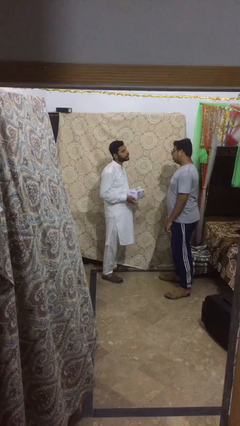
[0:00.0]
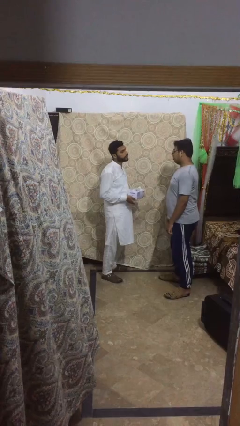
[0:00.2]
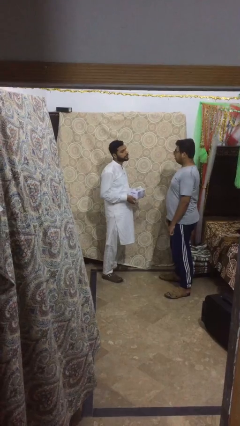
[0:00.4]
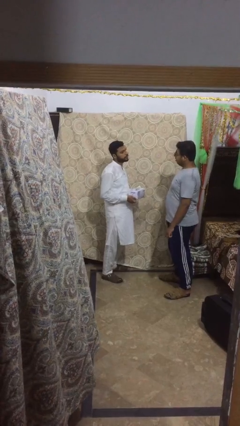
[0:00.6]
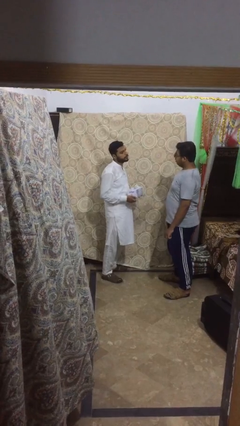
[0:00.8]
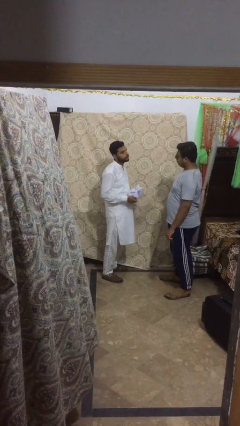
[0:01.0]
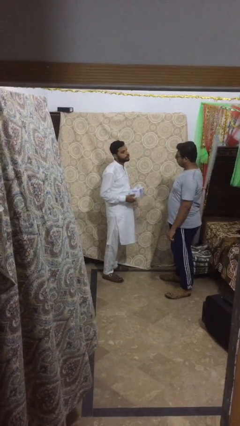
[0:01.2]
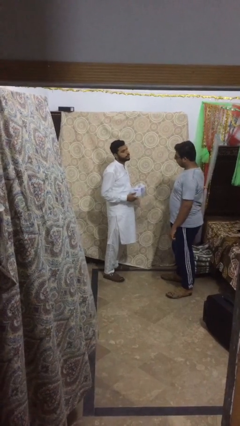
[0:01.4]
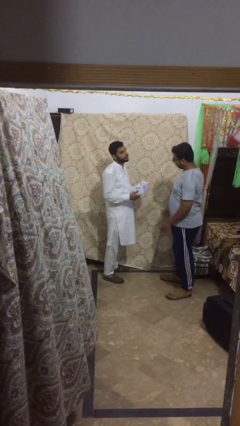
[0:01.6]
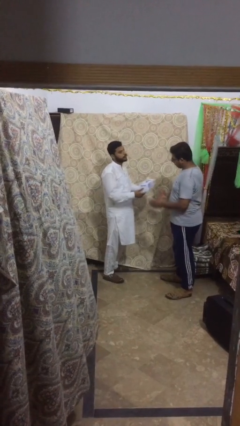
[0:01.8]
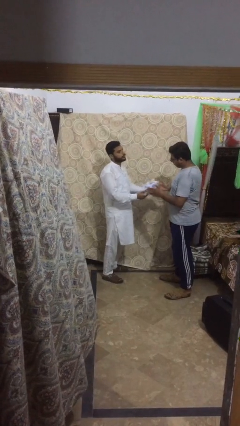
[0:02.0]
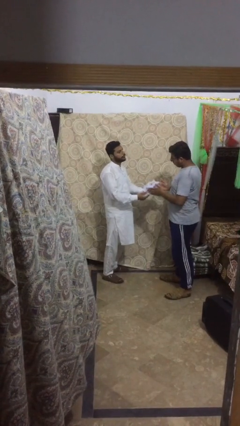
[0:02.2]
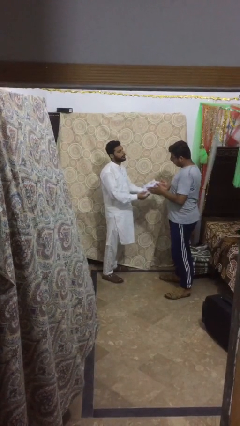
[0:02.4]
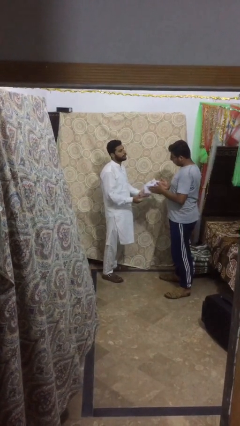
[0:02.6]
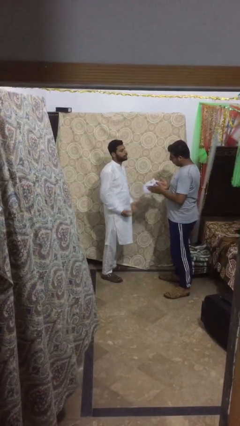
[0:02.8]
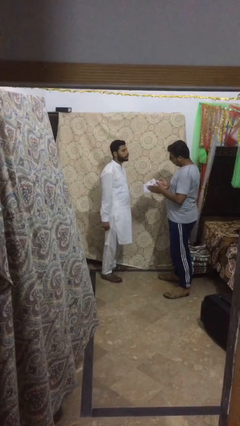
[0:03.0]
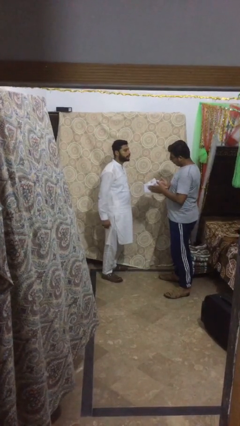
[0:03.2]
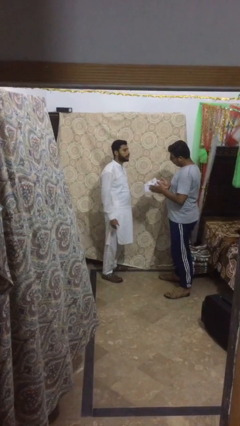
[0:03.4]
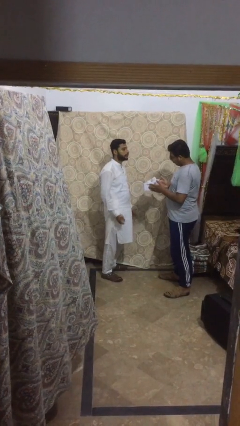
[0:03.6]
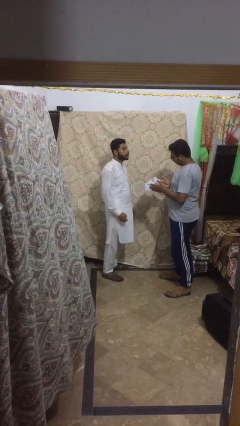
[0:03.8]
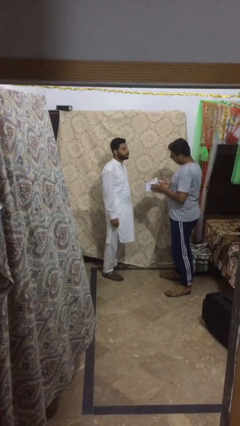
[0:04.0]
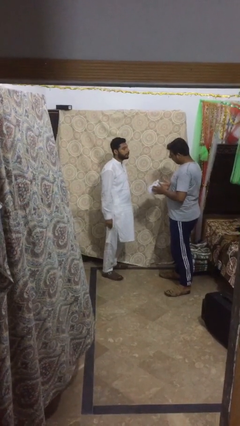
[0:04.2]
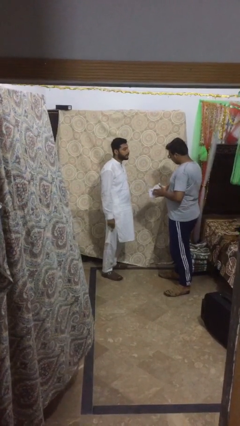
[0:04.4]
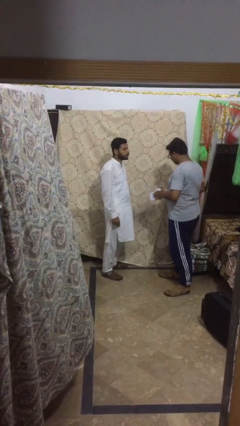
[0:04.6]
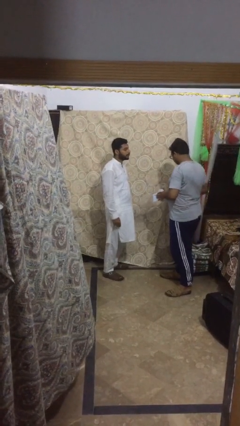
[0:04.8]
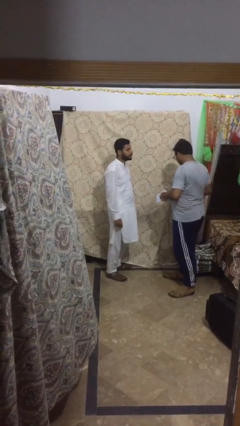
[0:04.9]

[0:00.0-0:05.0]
person transfers object to person

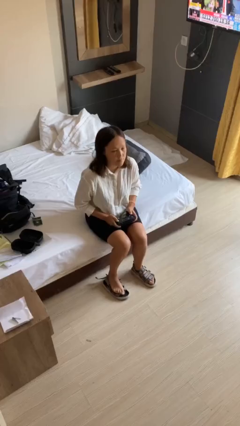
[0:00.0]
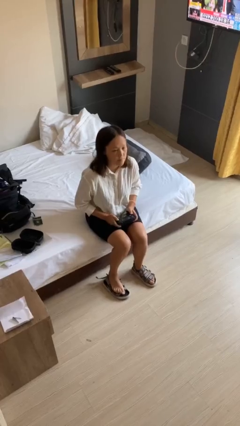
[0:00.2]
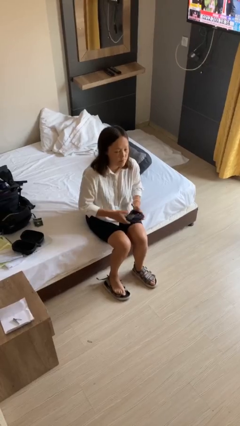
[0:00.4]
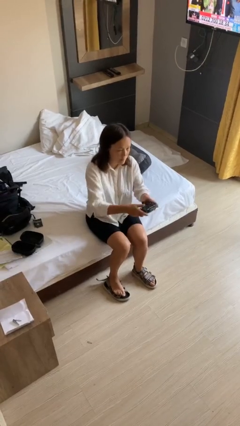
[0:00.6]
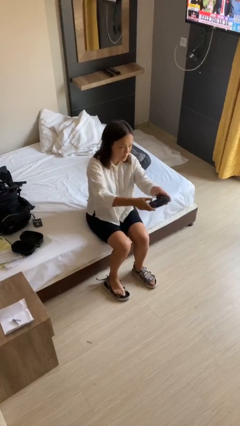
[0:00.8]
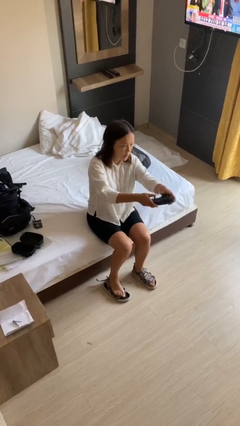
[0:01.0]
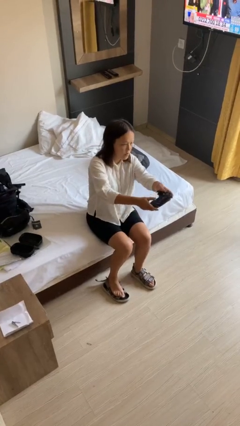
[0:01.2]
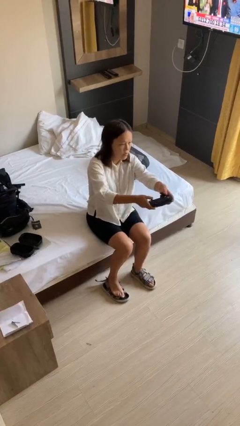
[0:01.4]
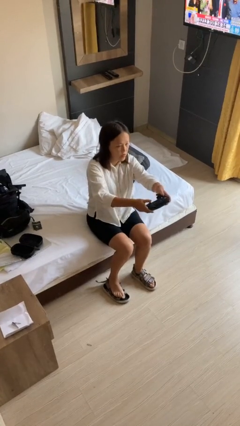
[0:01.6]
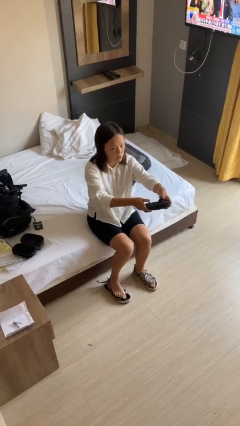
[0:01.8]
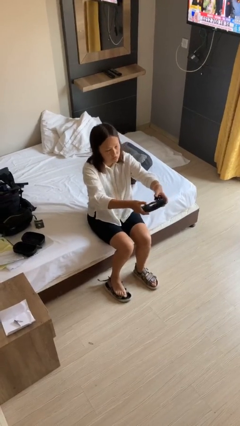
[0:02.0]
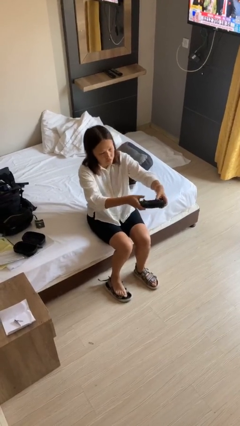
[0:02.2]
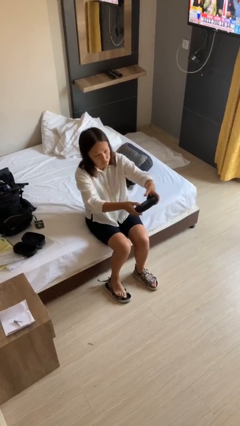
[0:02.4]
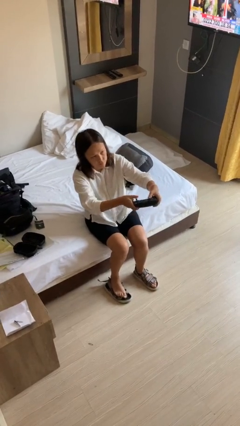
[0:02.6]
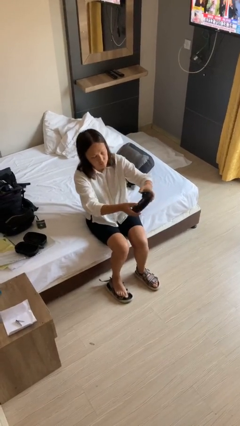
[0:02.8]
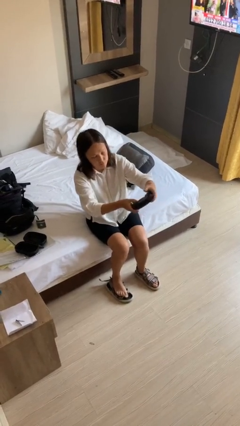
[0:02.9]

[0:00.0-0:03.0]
person interacts with handheld game

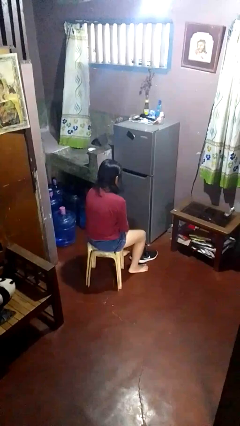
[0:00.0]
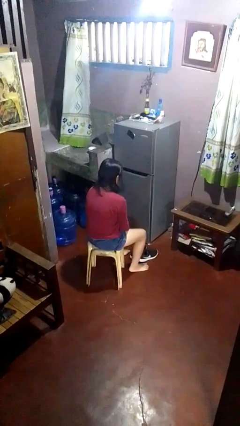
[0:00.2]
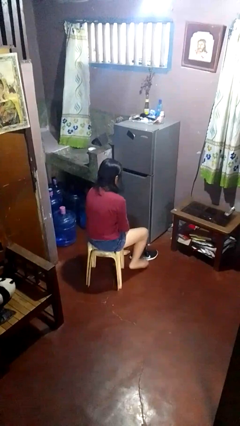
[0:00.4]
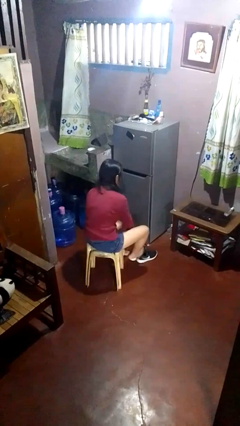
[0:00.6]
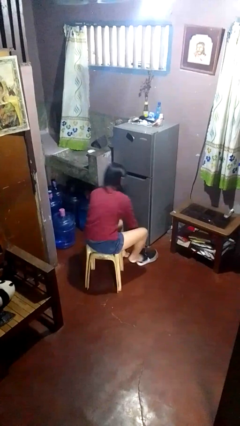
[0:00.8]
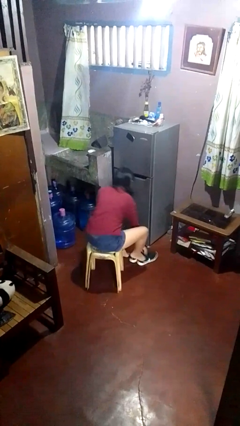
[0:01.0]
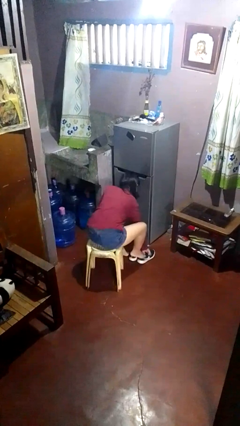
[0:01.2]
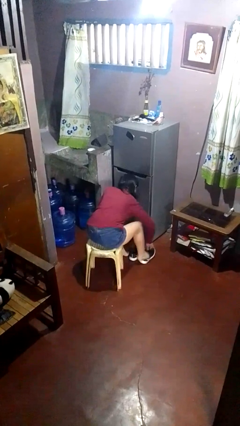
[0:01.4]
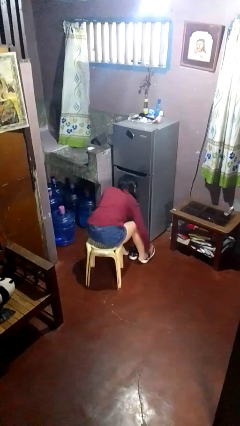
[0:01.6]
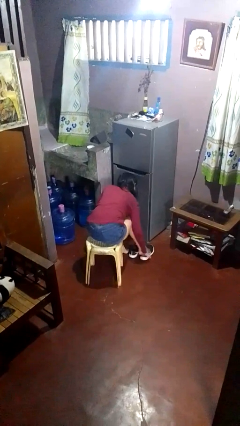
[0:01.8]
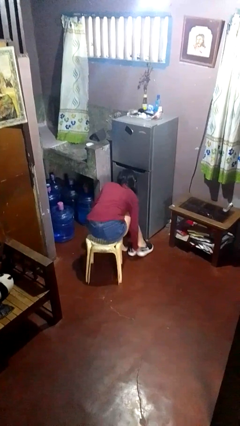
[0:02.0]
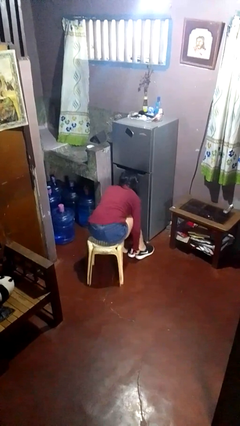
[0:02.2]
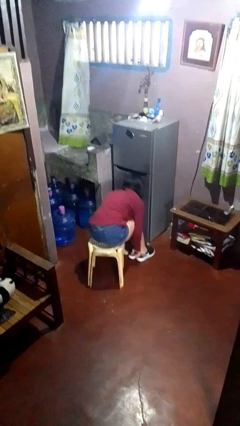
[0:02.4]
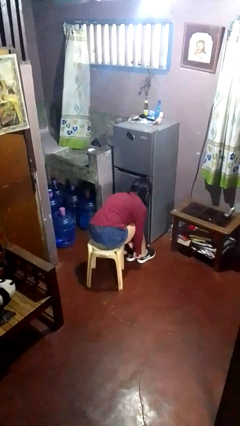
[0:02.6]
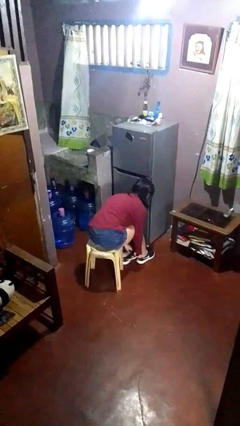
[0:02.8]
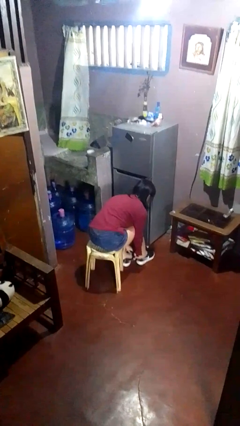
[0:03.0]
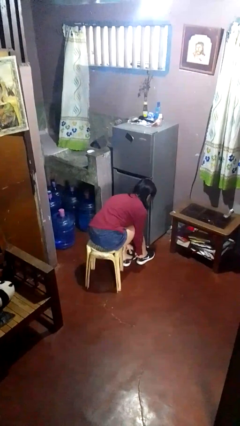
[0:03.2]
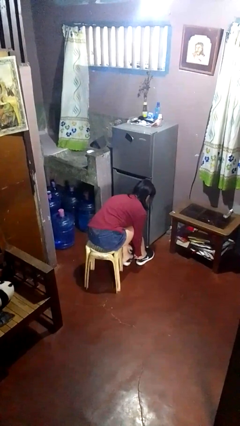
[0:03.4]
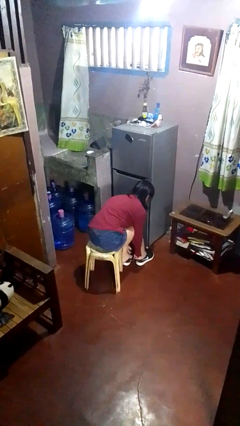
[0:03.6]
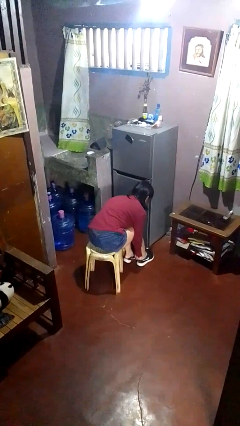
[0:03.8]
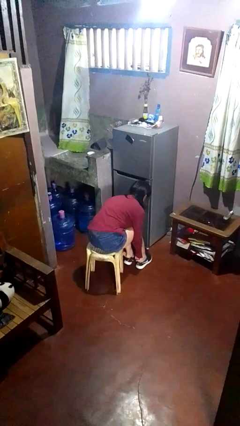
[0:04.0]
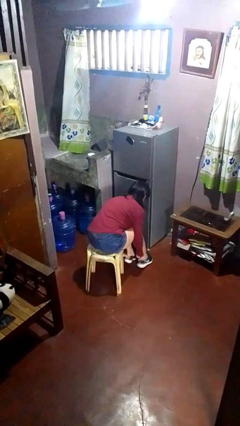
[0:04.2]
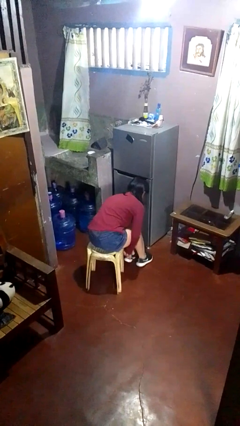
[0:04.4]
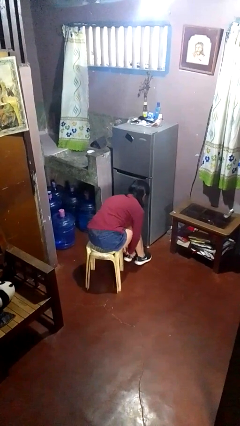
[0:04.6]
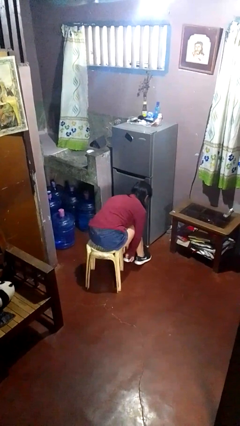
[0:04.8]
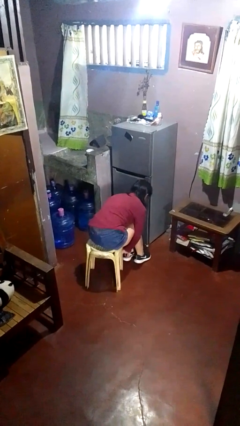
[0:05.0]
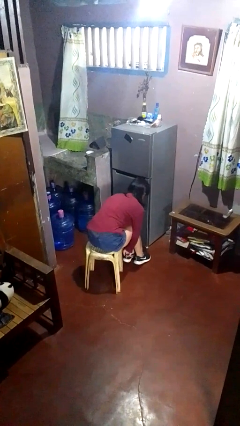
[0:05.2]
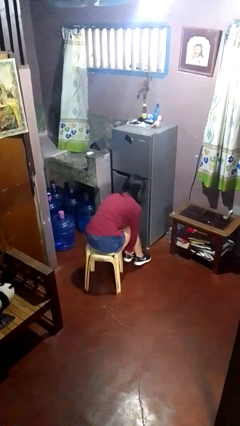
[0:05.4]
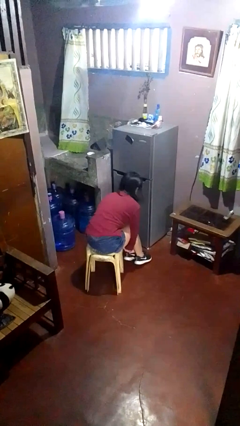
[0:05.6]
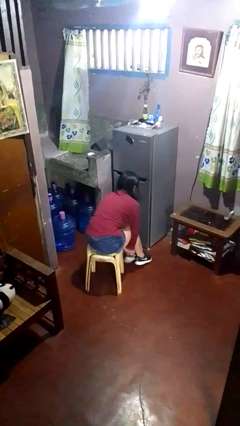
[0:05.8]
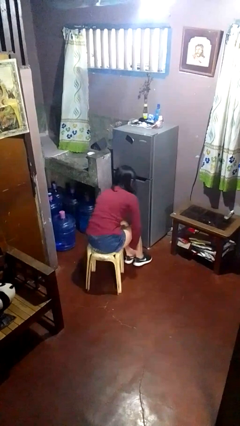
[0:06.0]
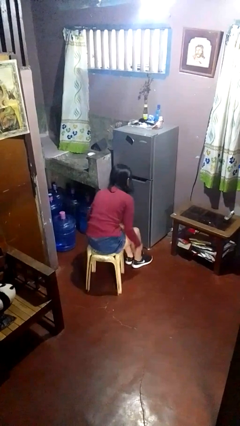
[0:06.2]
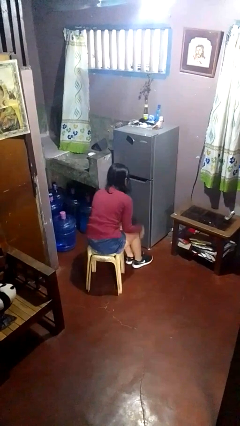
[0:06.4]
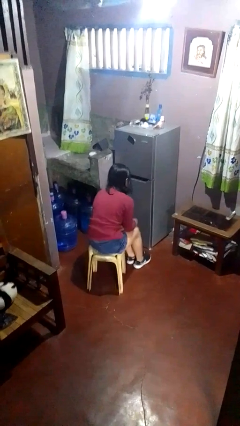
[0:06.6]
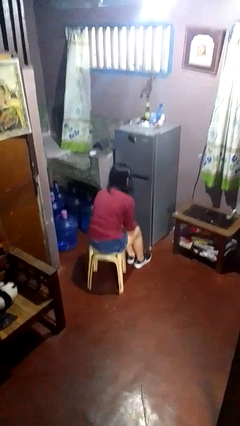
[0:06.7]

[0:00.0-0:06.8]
person puts on shoes

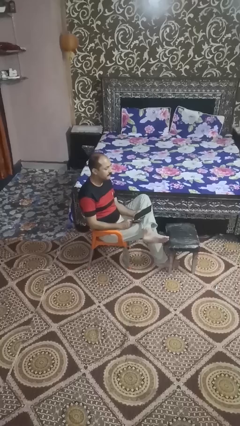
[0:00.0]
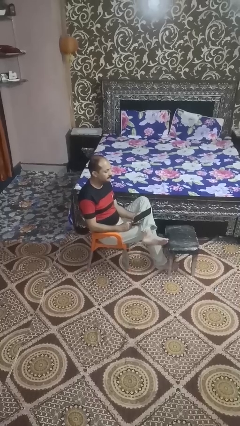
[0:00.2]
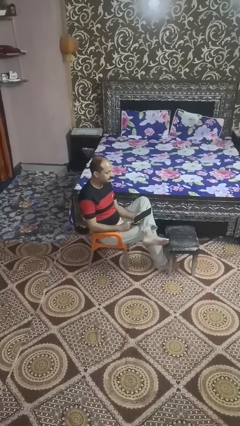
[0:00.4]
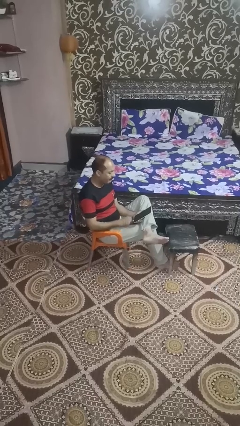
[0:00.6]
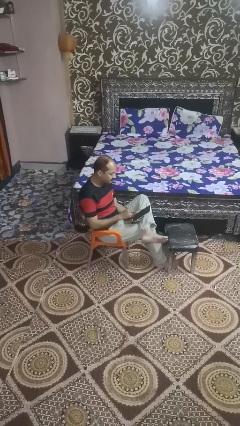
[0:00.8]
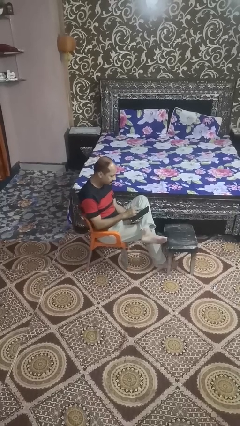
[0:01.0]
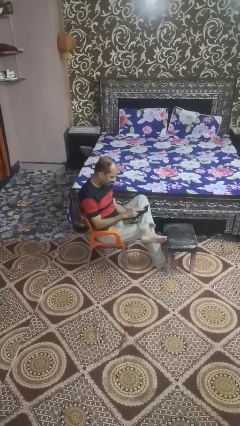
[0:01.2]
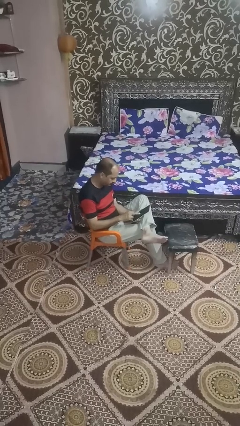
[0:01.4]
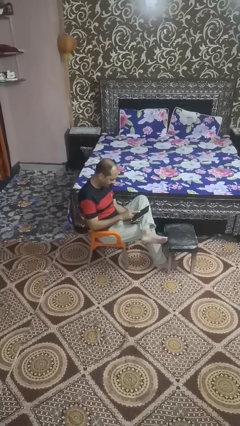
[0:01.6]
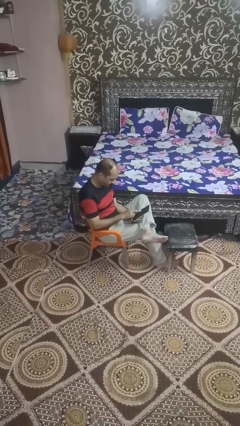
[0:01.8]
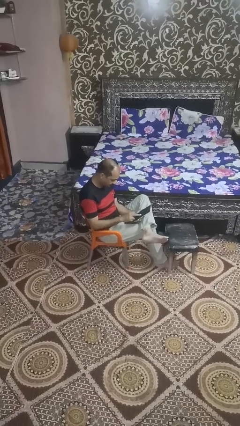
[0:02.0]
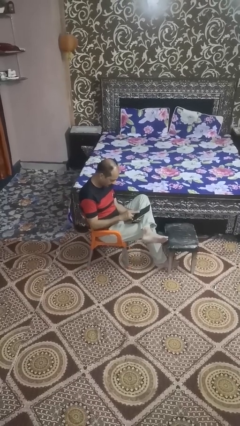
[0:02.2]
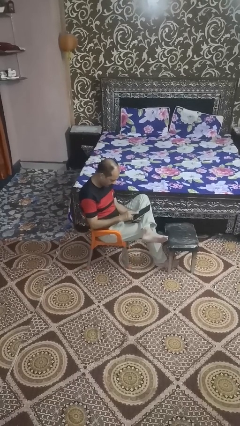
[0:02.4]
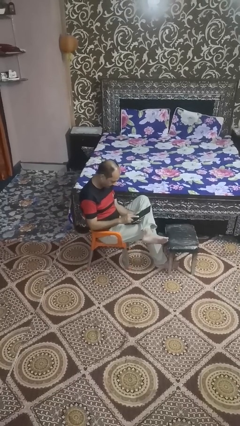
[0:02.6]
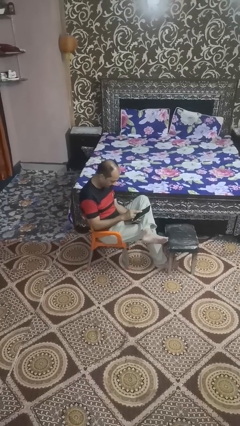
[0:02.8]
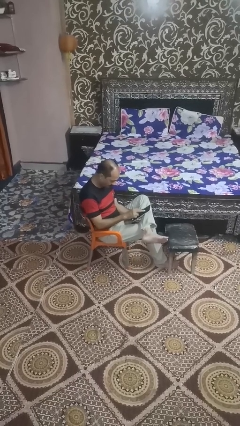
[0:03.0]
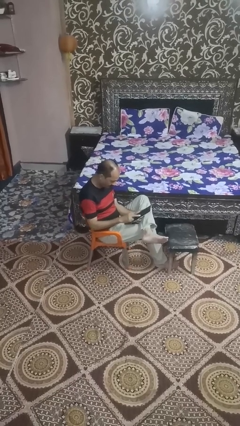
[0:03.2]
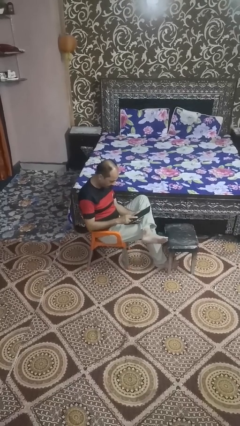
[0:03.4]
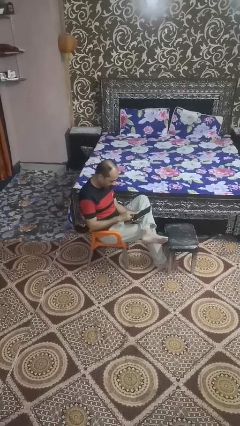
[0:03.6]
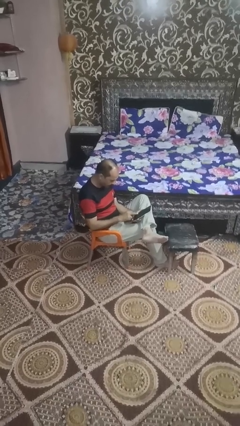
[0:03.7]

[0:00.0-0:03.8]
person interacts with tablet
